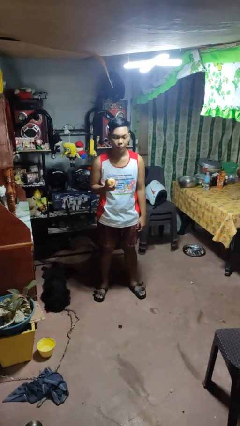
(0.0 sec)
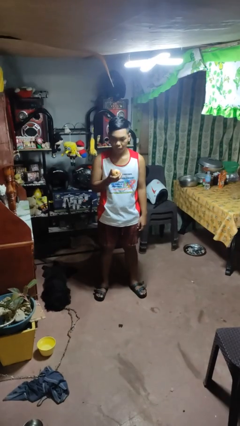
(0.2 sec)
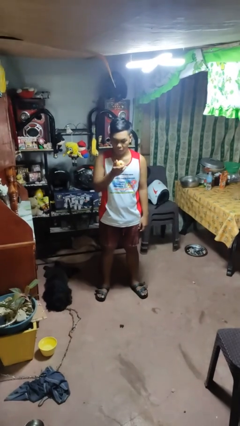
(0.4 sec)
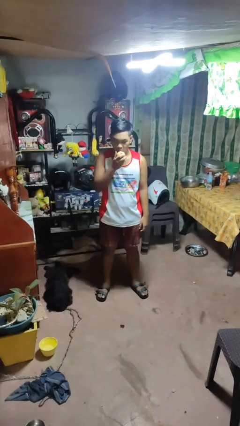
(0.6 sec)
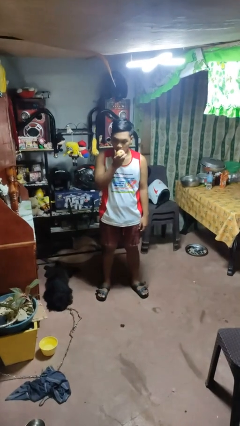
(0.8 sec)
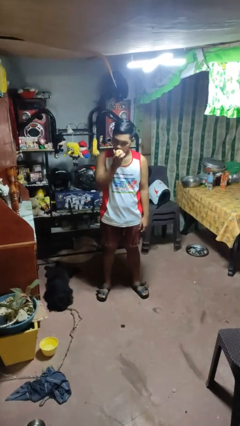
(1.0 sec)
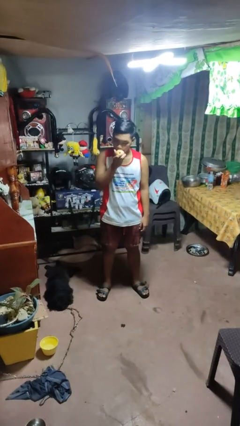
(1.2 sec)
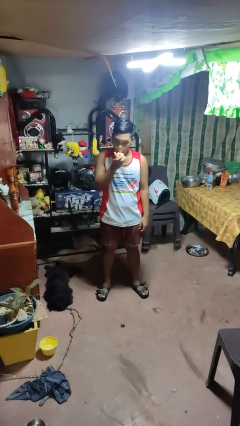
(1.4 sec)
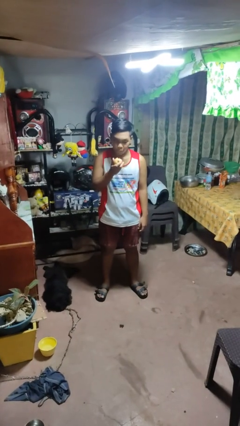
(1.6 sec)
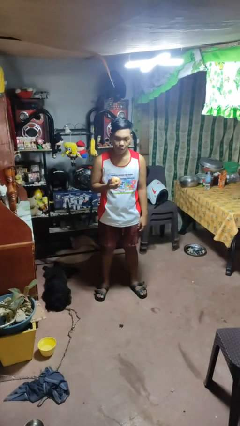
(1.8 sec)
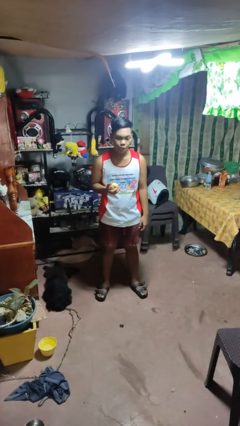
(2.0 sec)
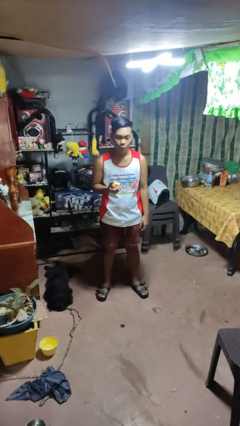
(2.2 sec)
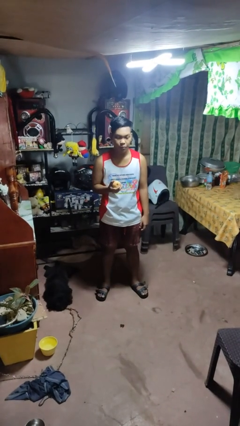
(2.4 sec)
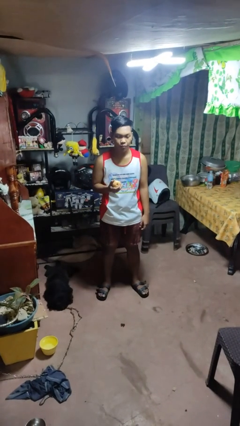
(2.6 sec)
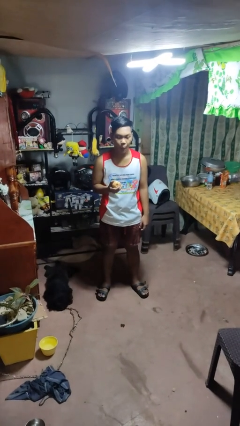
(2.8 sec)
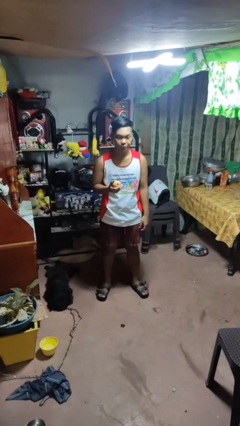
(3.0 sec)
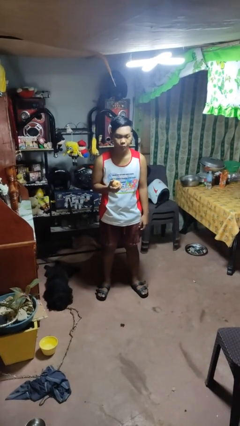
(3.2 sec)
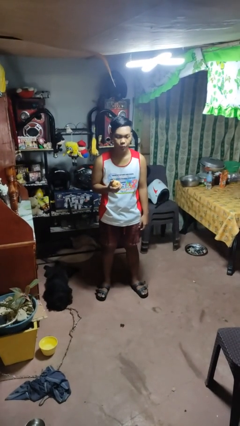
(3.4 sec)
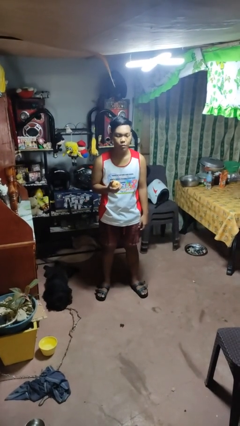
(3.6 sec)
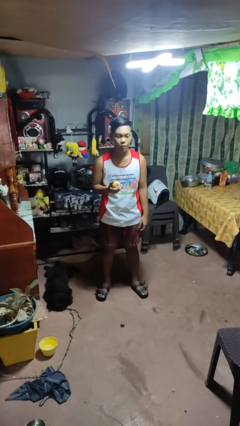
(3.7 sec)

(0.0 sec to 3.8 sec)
person eats apple

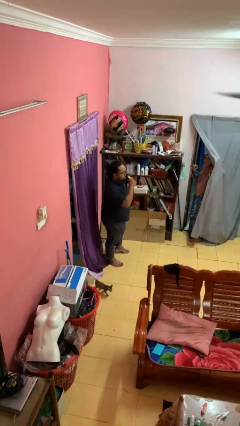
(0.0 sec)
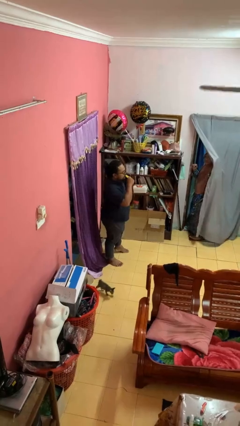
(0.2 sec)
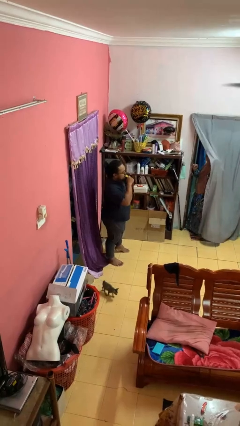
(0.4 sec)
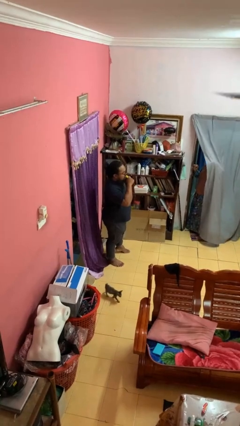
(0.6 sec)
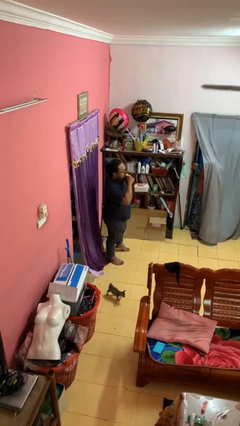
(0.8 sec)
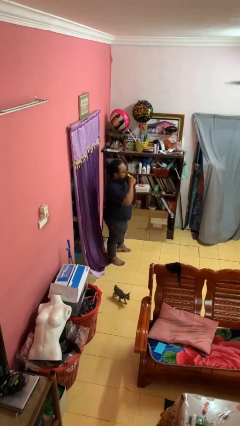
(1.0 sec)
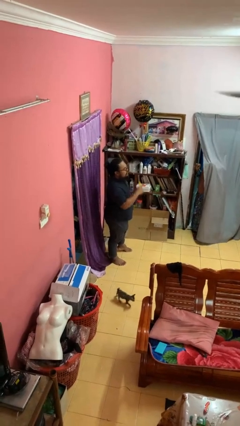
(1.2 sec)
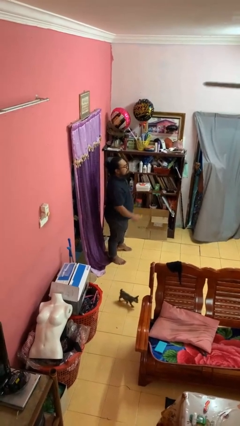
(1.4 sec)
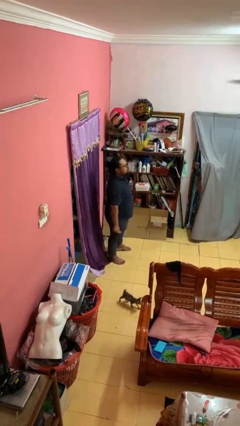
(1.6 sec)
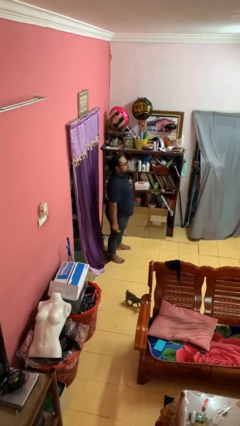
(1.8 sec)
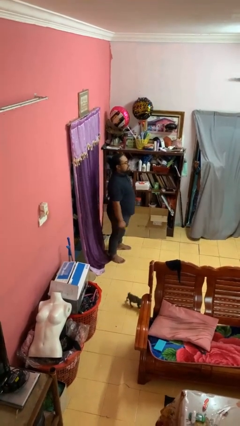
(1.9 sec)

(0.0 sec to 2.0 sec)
person eats banana

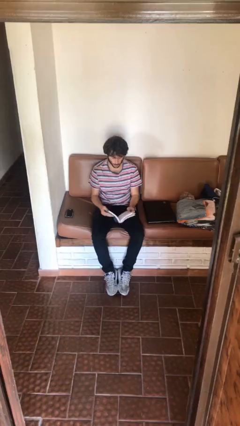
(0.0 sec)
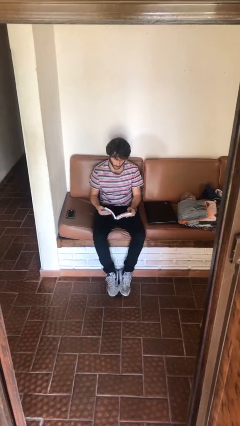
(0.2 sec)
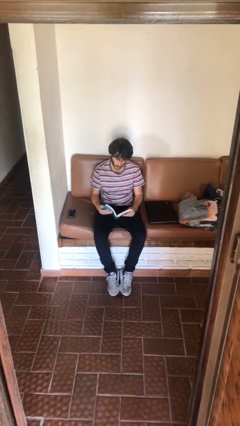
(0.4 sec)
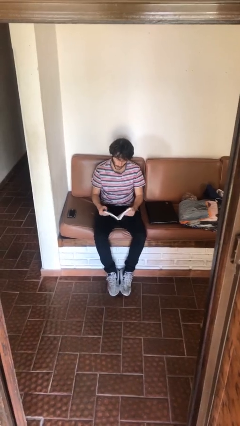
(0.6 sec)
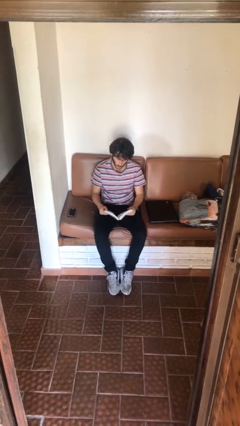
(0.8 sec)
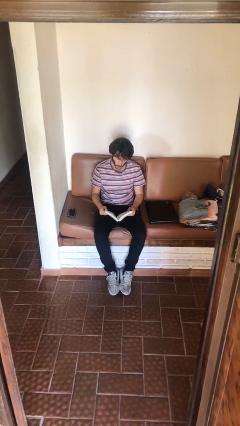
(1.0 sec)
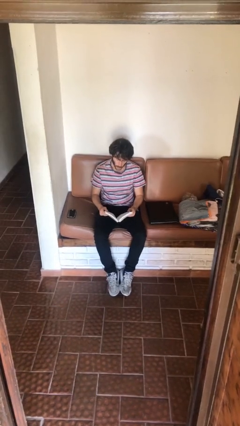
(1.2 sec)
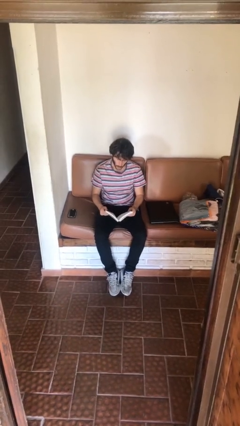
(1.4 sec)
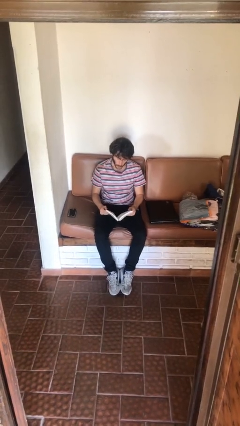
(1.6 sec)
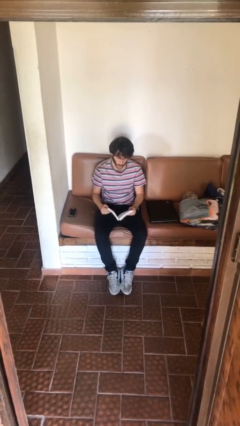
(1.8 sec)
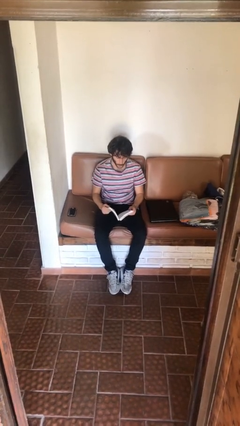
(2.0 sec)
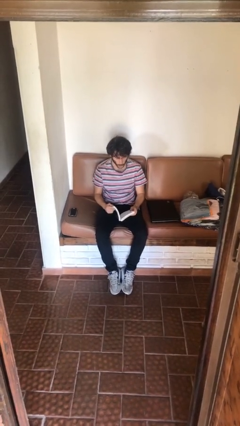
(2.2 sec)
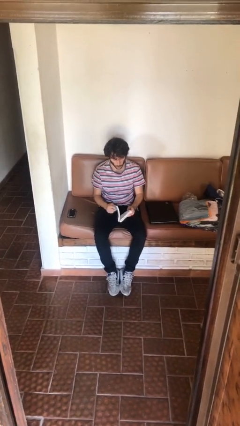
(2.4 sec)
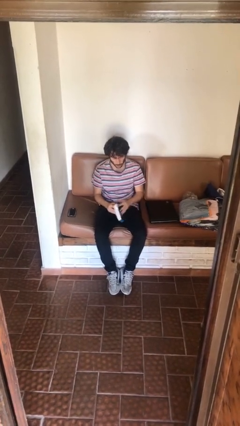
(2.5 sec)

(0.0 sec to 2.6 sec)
person reads document

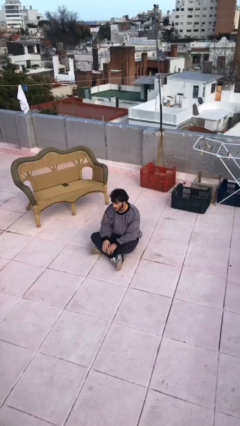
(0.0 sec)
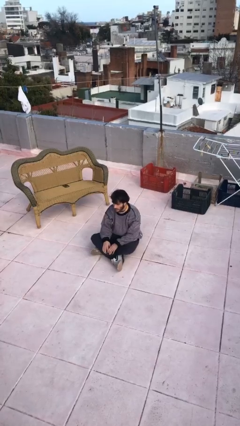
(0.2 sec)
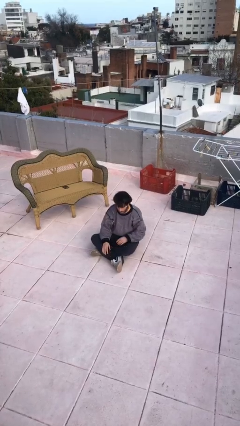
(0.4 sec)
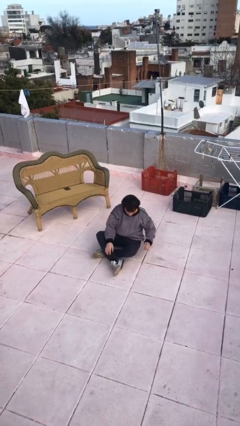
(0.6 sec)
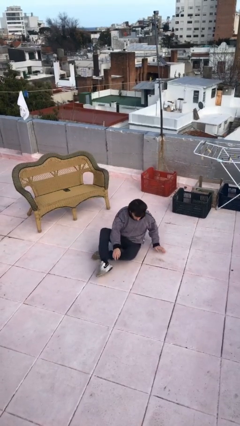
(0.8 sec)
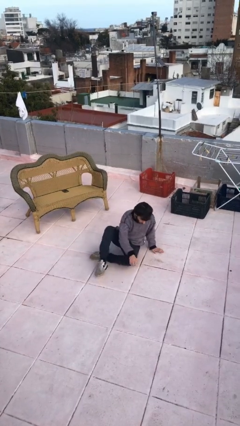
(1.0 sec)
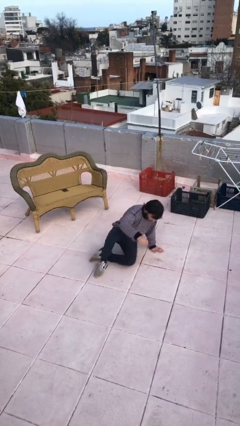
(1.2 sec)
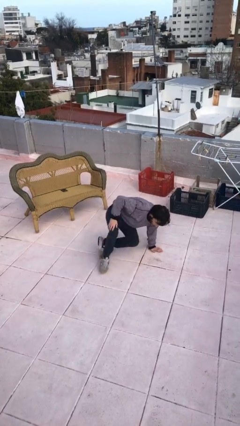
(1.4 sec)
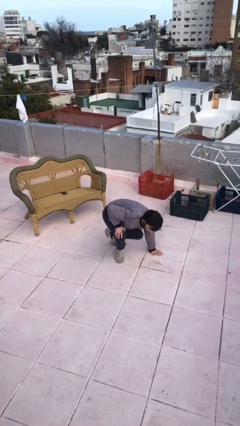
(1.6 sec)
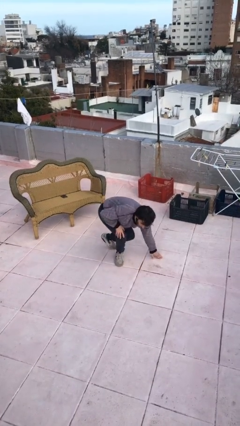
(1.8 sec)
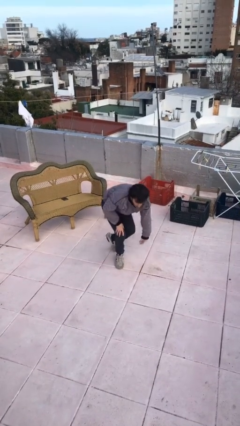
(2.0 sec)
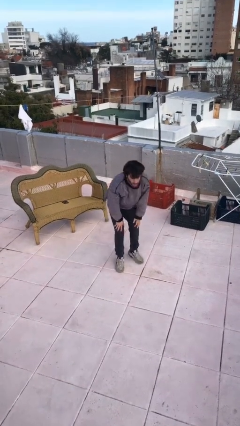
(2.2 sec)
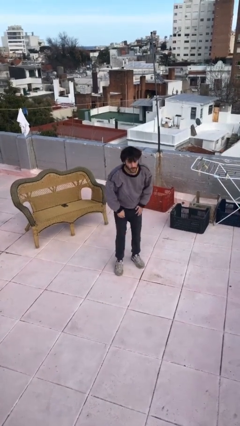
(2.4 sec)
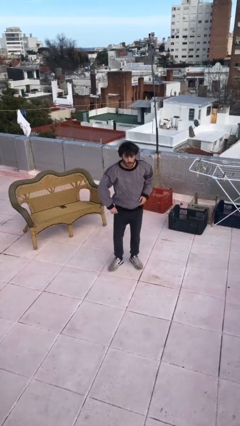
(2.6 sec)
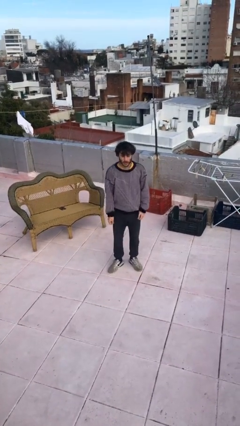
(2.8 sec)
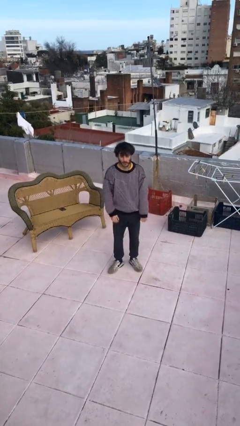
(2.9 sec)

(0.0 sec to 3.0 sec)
person stands up from floor

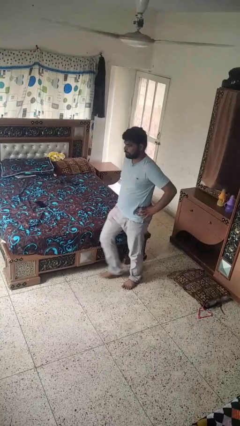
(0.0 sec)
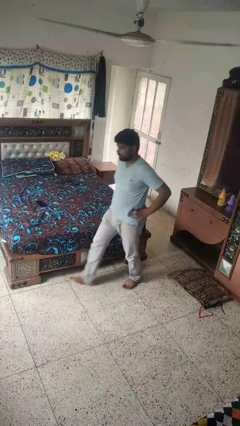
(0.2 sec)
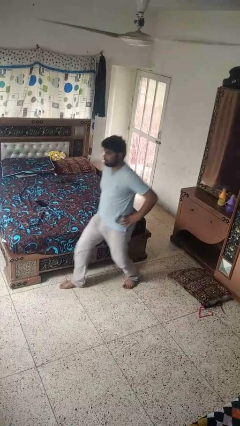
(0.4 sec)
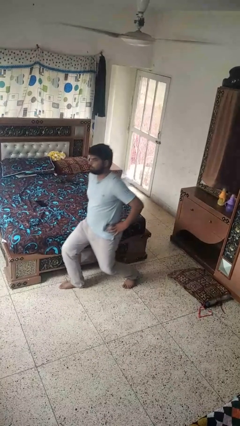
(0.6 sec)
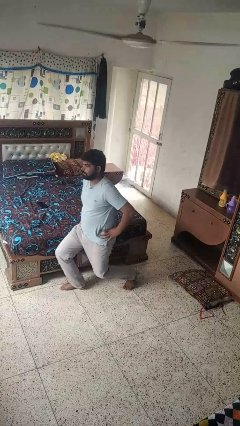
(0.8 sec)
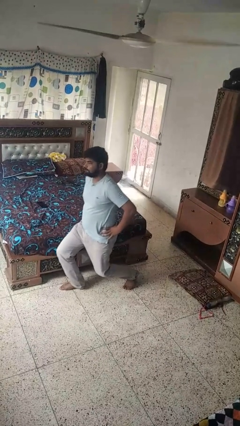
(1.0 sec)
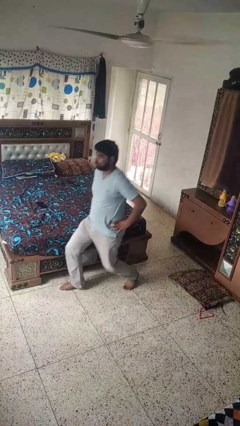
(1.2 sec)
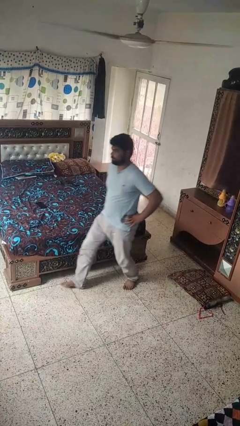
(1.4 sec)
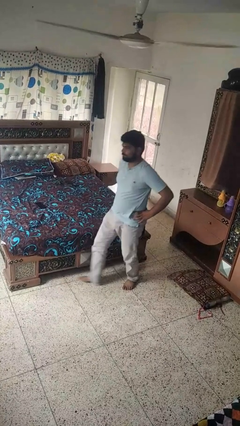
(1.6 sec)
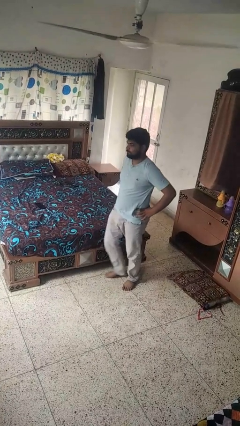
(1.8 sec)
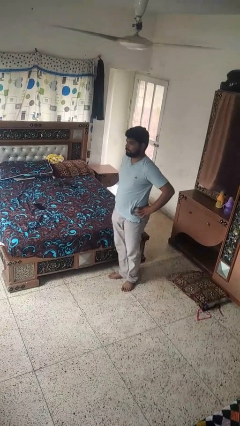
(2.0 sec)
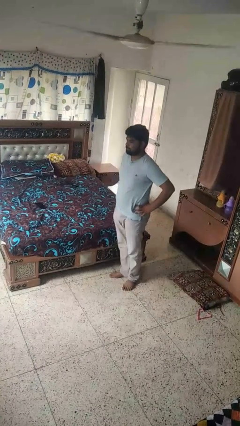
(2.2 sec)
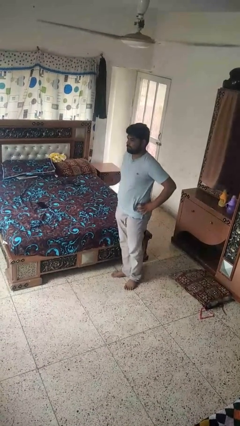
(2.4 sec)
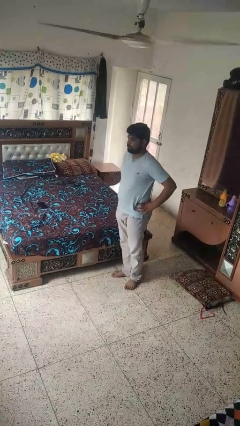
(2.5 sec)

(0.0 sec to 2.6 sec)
person exercises with lunges

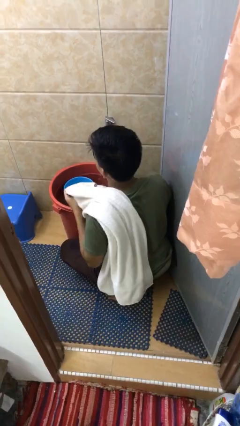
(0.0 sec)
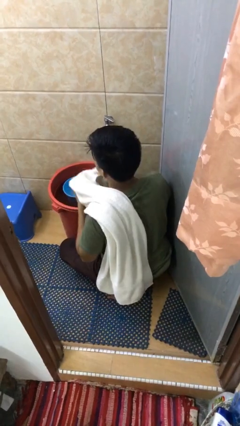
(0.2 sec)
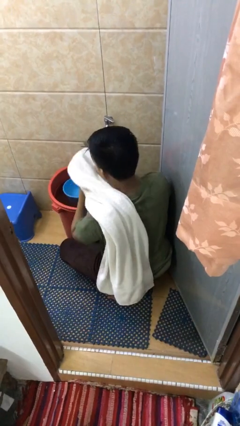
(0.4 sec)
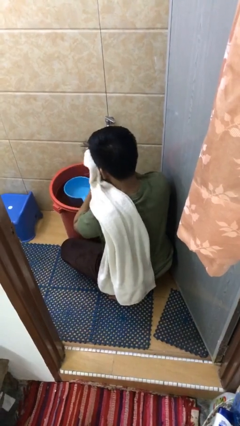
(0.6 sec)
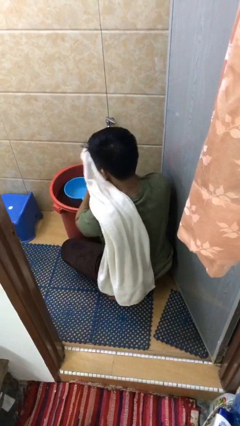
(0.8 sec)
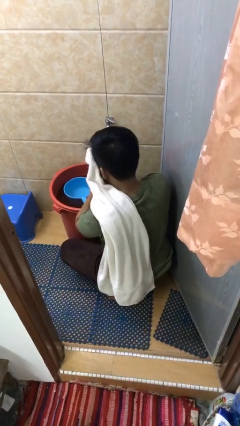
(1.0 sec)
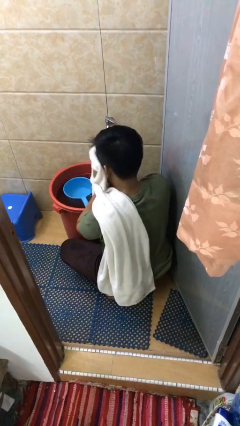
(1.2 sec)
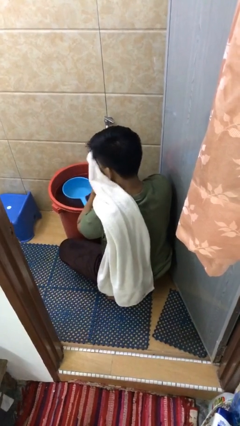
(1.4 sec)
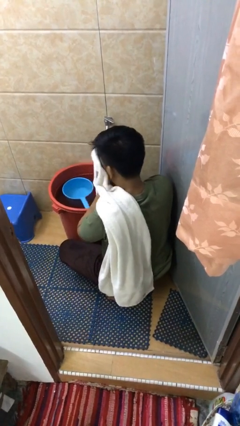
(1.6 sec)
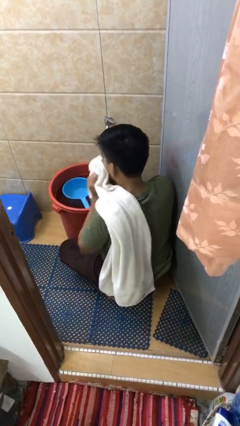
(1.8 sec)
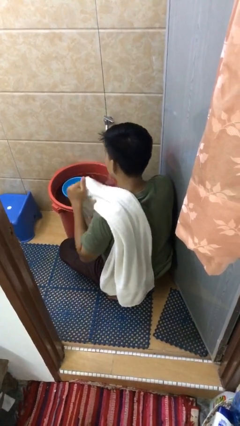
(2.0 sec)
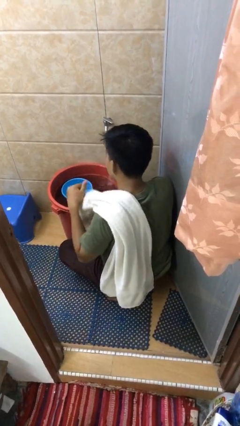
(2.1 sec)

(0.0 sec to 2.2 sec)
person dries face with towel

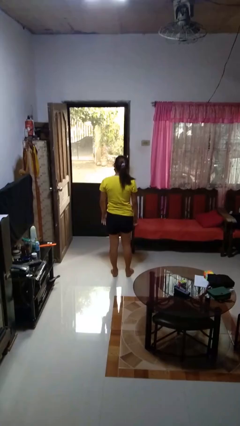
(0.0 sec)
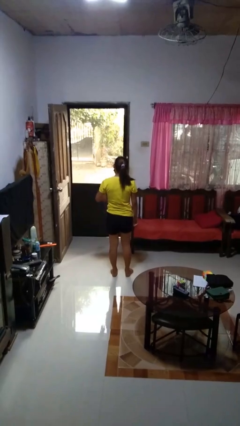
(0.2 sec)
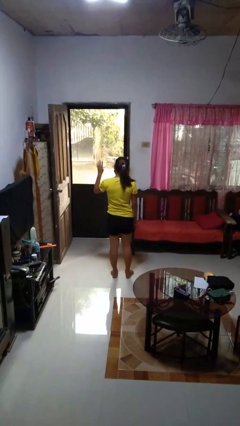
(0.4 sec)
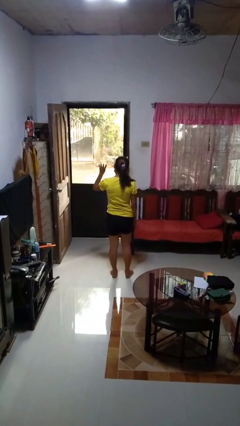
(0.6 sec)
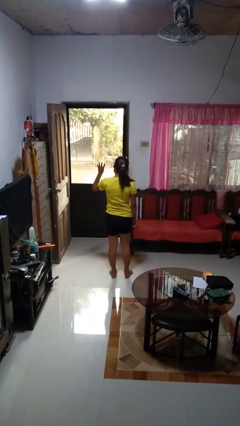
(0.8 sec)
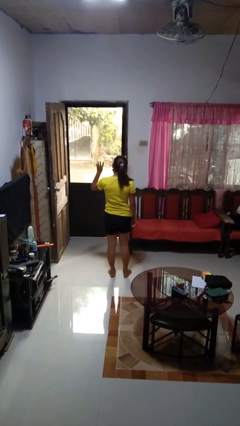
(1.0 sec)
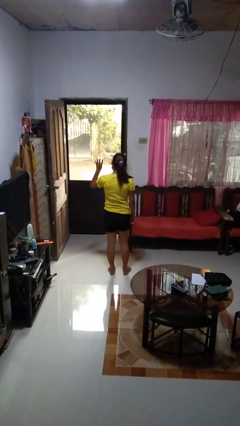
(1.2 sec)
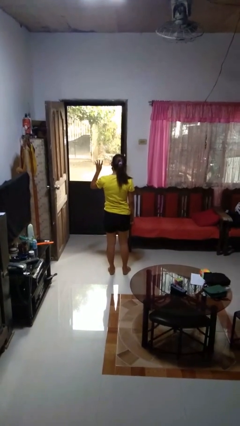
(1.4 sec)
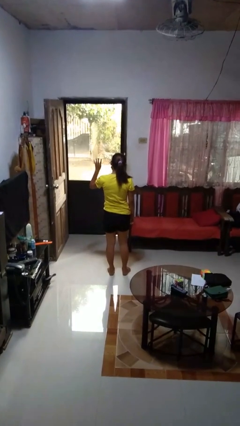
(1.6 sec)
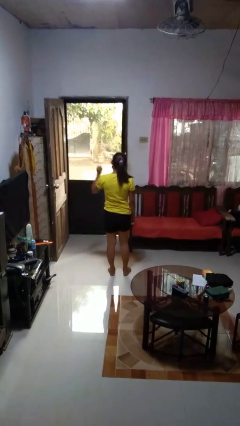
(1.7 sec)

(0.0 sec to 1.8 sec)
person gestures number four
